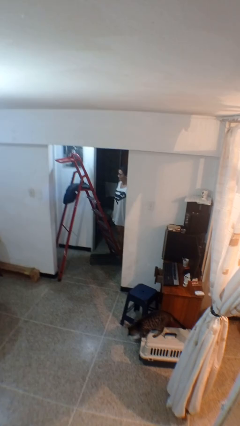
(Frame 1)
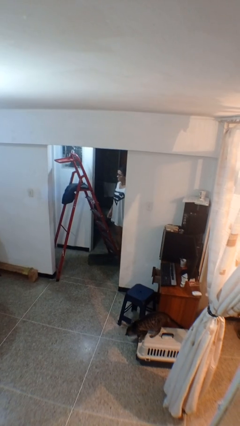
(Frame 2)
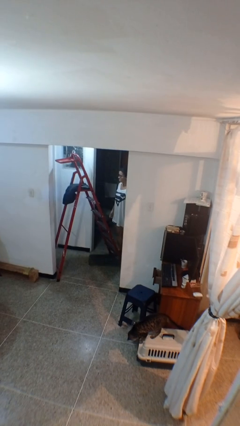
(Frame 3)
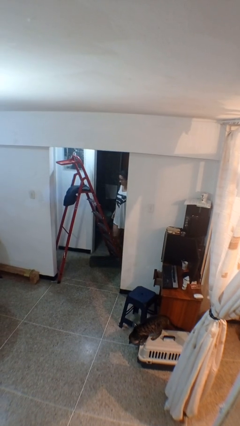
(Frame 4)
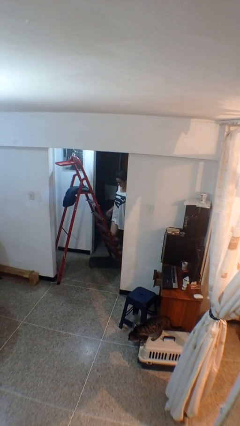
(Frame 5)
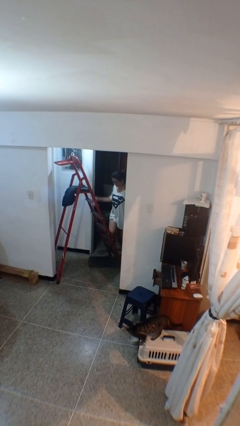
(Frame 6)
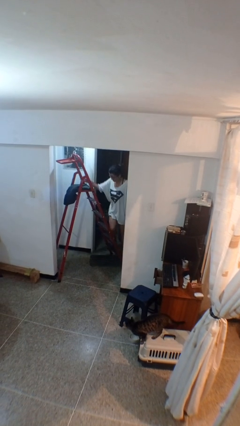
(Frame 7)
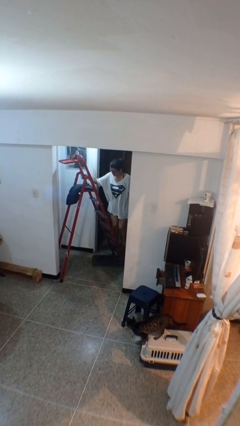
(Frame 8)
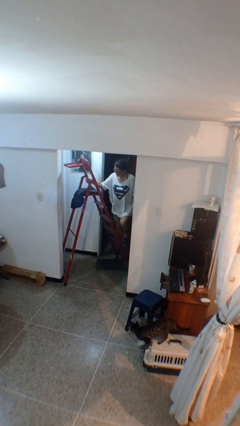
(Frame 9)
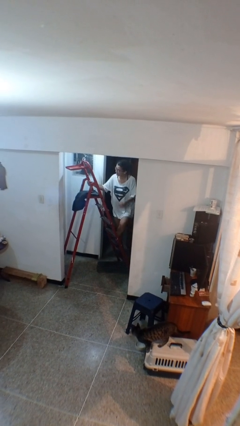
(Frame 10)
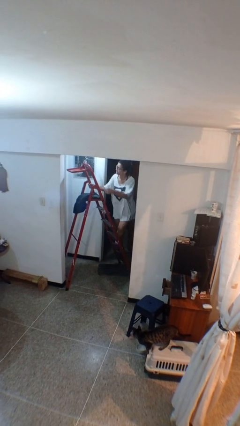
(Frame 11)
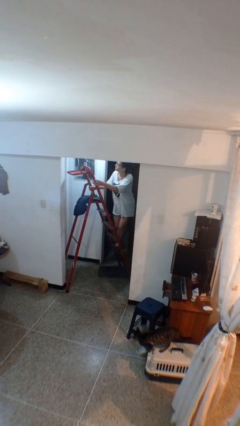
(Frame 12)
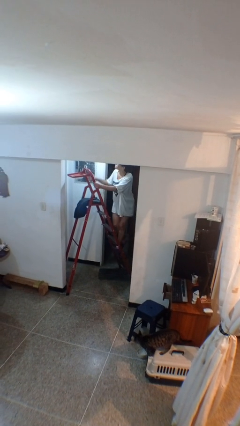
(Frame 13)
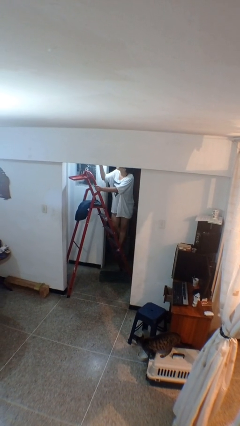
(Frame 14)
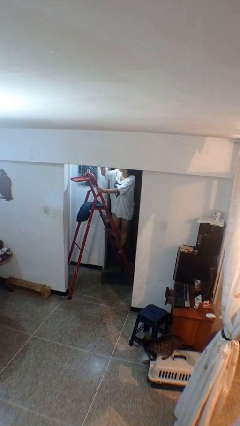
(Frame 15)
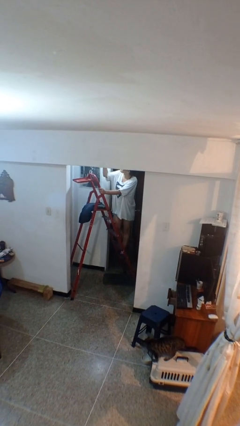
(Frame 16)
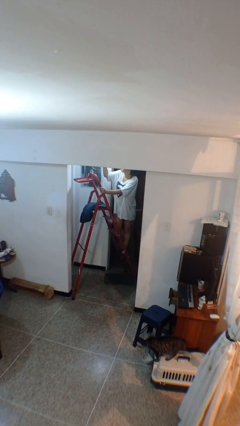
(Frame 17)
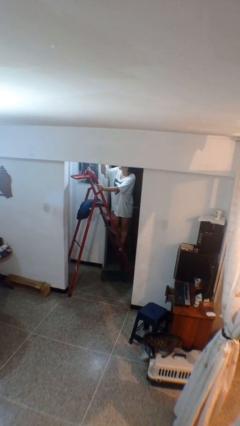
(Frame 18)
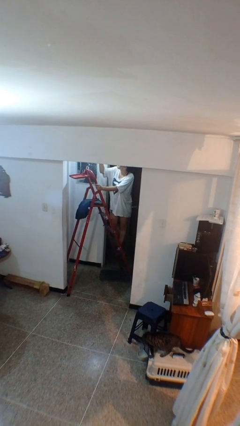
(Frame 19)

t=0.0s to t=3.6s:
person climbs up ladder

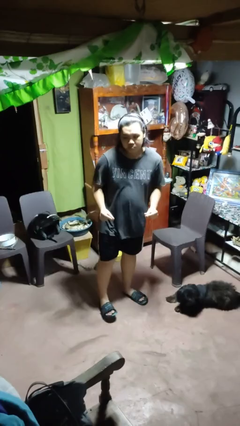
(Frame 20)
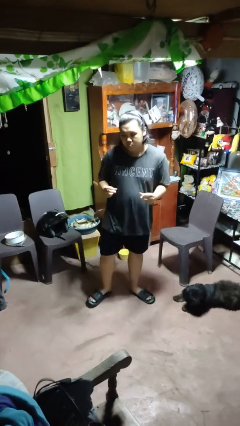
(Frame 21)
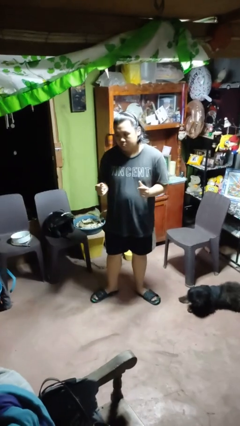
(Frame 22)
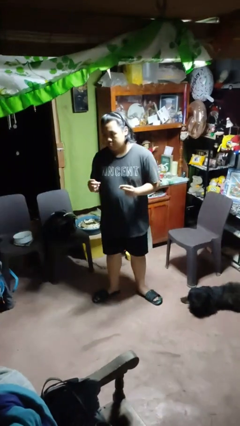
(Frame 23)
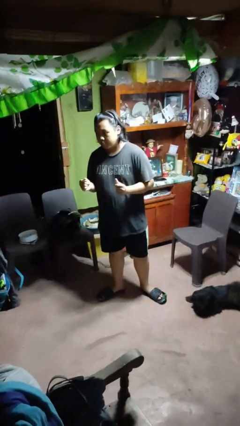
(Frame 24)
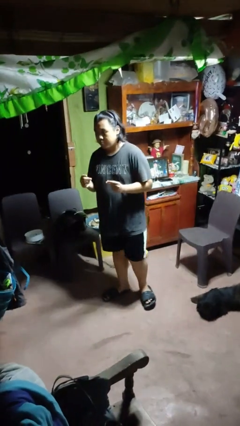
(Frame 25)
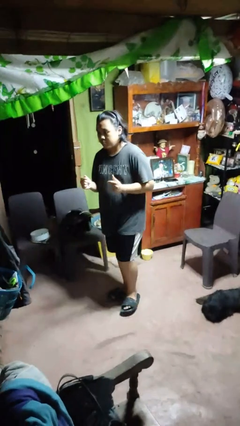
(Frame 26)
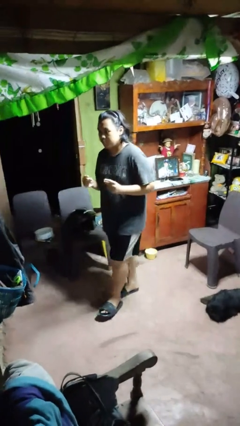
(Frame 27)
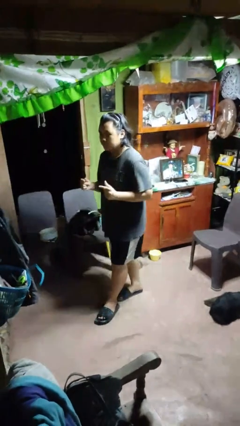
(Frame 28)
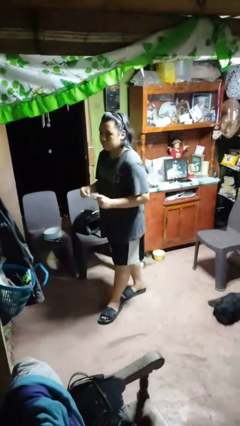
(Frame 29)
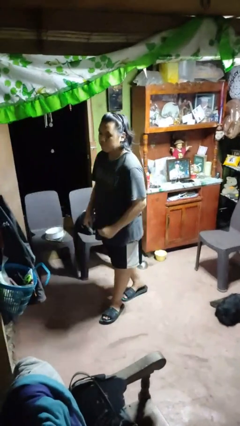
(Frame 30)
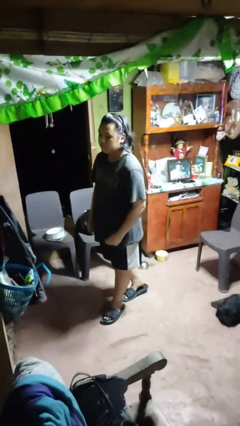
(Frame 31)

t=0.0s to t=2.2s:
person snaps fingers

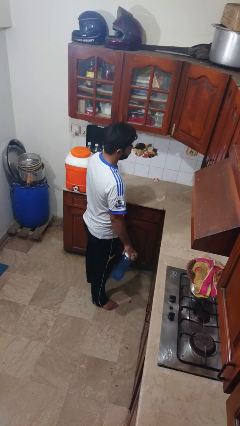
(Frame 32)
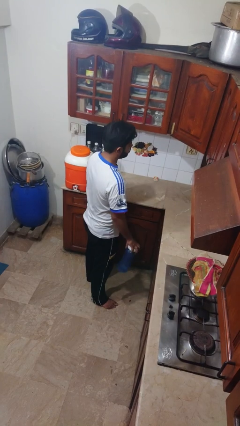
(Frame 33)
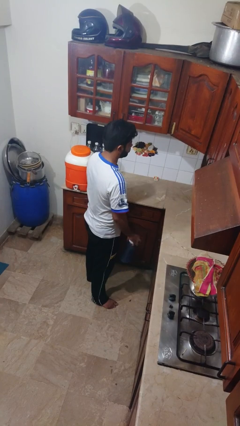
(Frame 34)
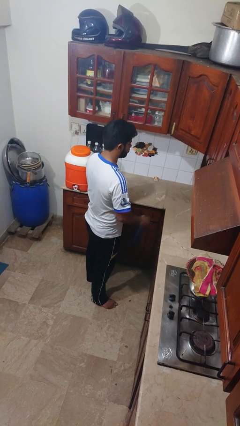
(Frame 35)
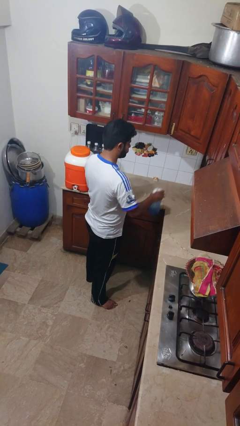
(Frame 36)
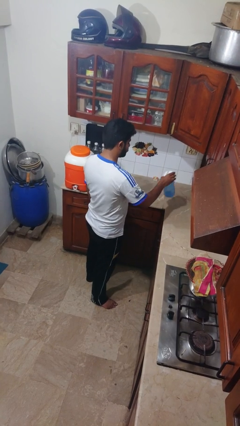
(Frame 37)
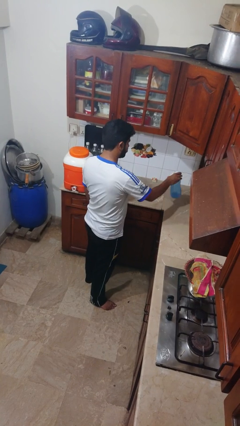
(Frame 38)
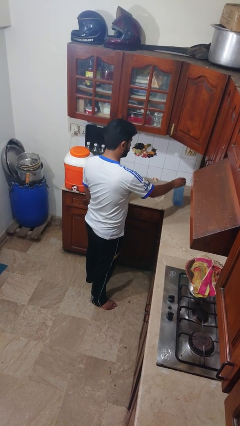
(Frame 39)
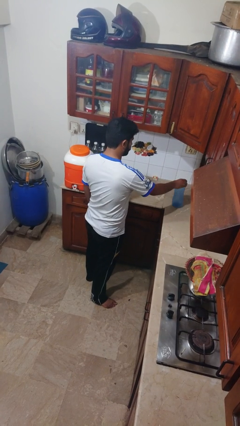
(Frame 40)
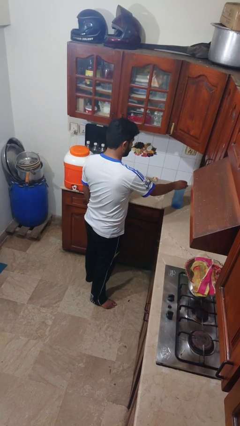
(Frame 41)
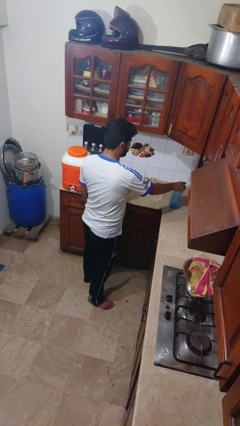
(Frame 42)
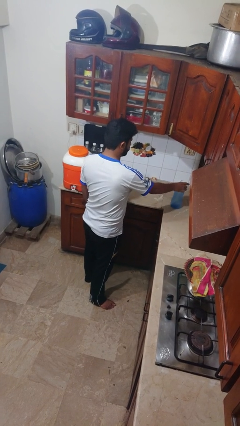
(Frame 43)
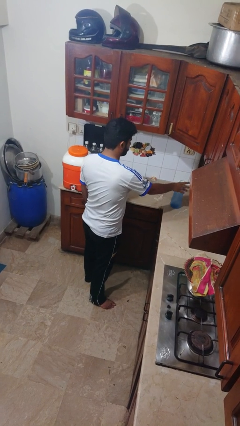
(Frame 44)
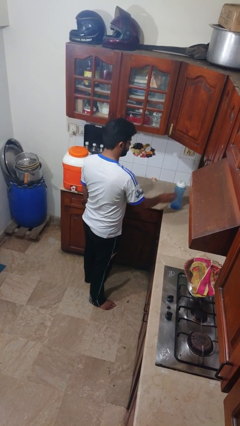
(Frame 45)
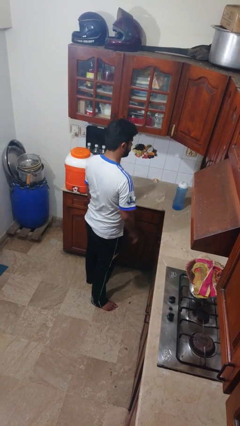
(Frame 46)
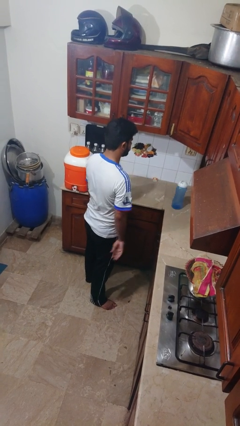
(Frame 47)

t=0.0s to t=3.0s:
person puts down object on countertop

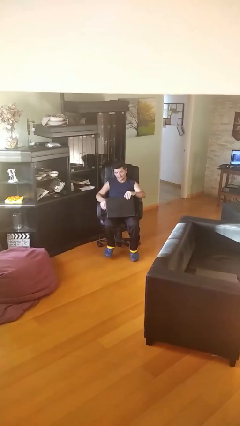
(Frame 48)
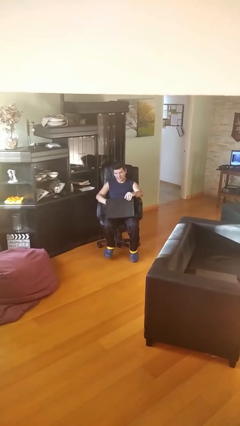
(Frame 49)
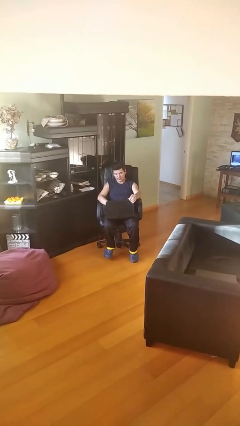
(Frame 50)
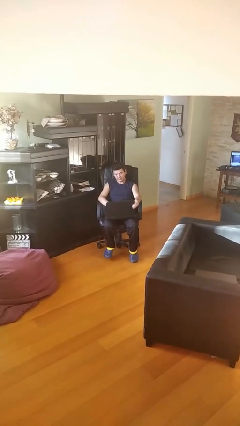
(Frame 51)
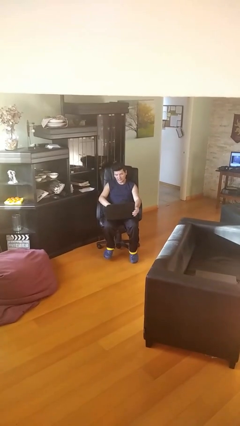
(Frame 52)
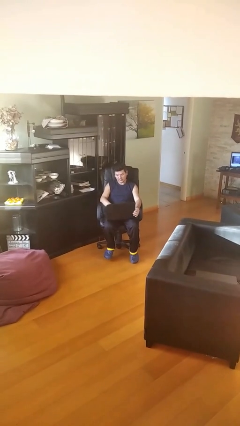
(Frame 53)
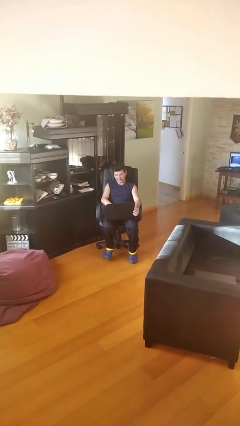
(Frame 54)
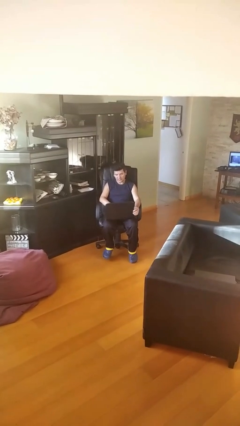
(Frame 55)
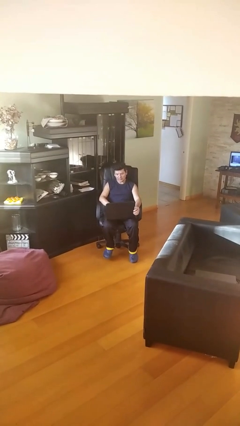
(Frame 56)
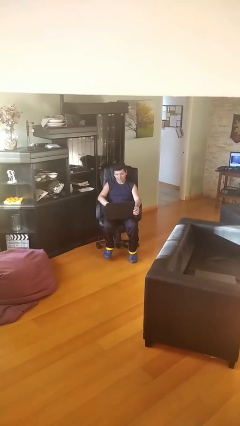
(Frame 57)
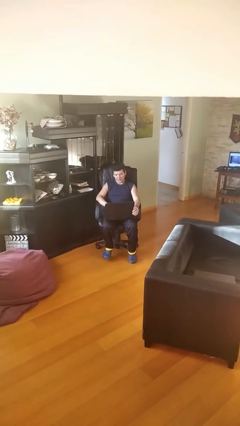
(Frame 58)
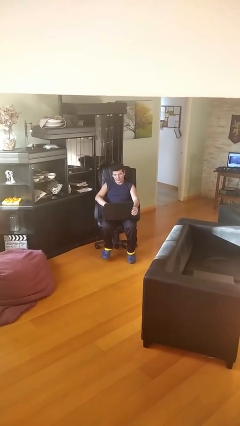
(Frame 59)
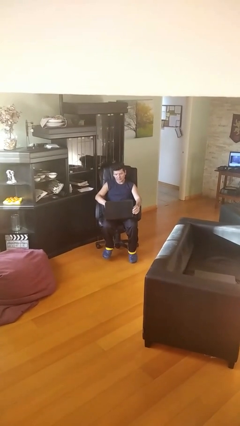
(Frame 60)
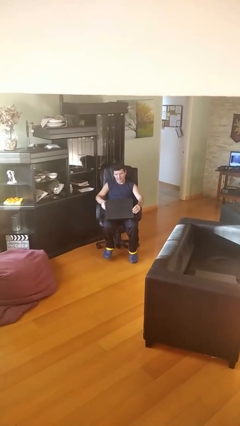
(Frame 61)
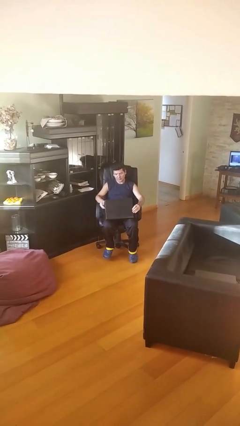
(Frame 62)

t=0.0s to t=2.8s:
person interacts with laptop

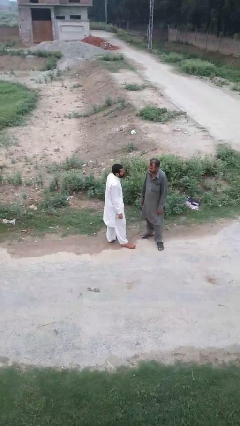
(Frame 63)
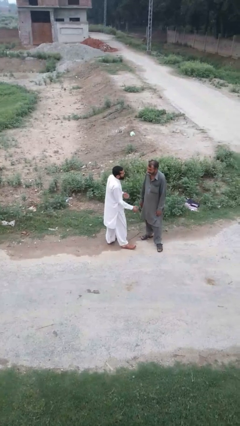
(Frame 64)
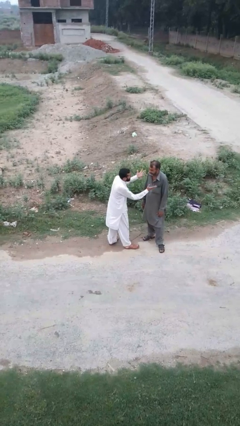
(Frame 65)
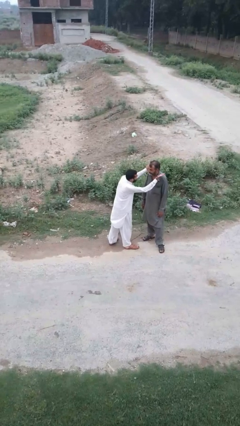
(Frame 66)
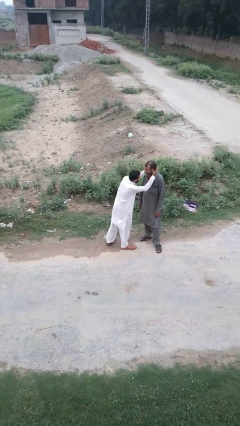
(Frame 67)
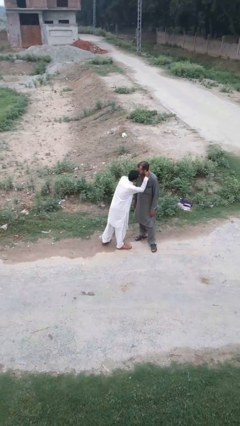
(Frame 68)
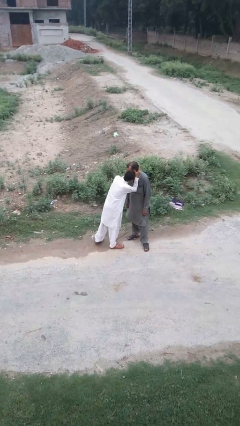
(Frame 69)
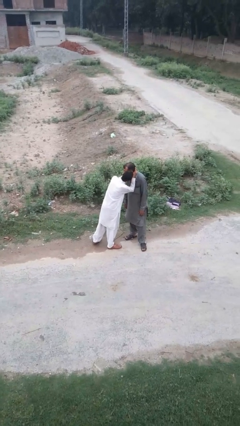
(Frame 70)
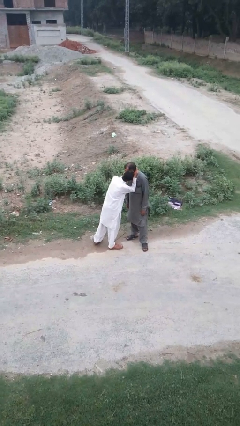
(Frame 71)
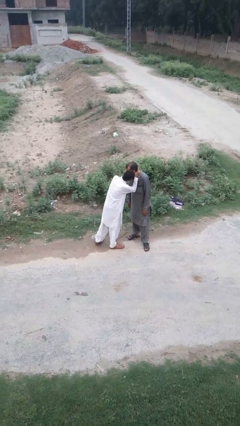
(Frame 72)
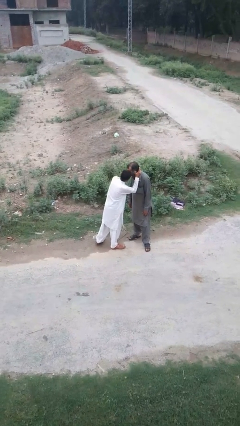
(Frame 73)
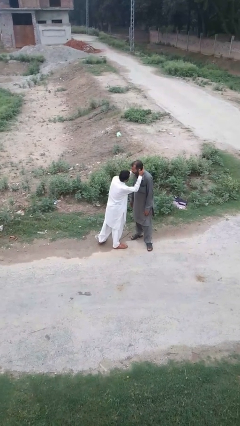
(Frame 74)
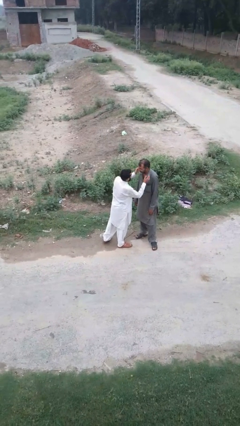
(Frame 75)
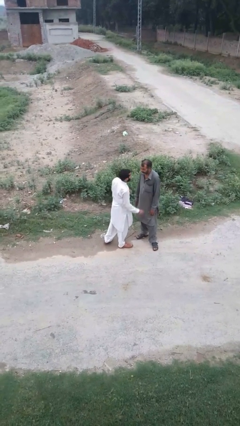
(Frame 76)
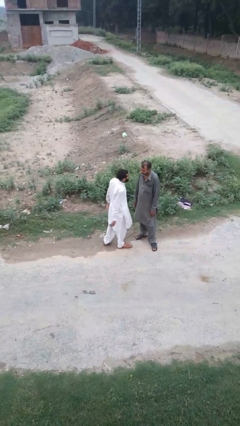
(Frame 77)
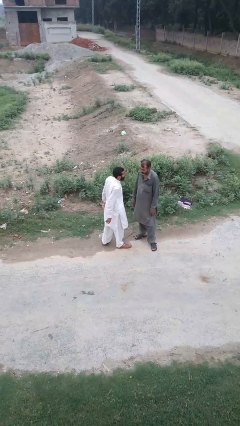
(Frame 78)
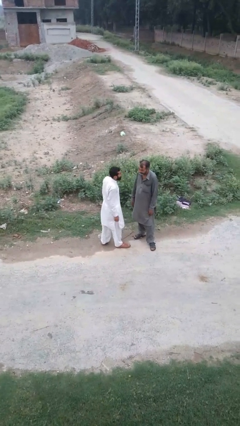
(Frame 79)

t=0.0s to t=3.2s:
person kisses cheek of person

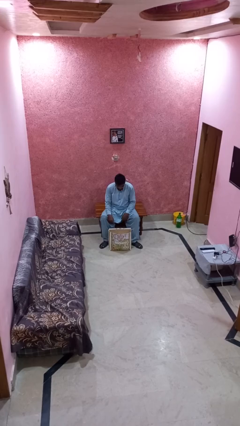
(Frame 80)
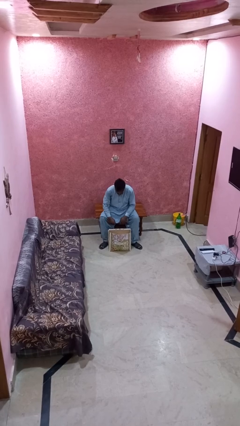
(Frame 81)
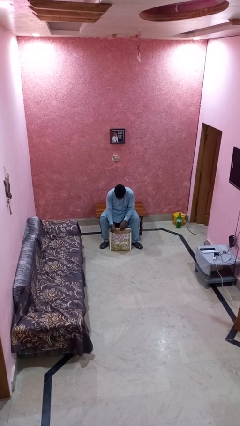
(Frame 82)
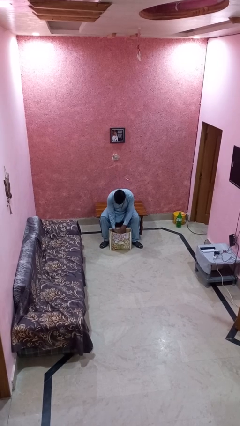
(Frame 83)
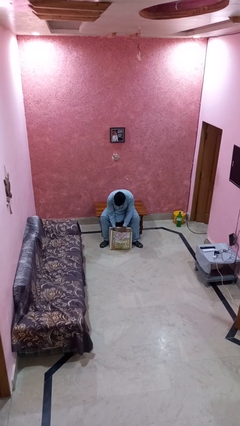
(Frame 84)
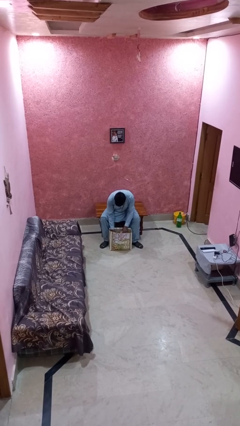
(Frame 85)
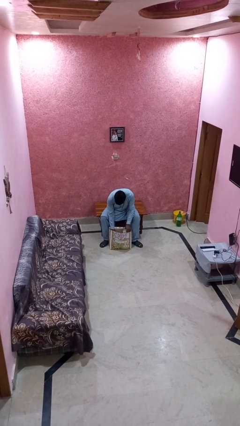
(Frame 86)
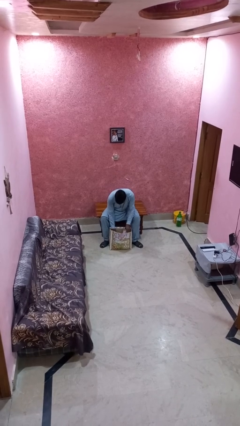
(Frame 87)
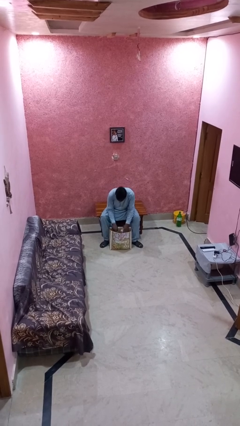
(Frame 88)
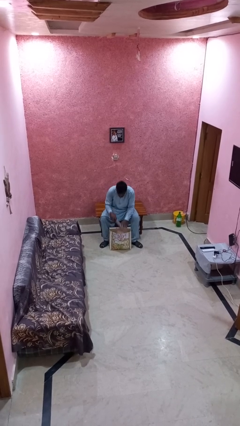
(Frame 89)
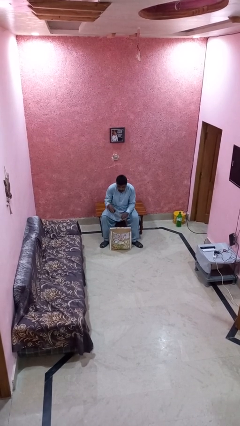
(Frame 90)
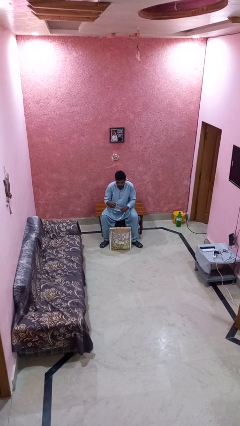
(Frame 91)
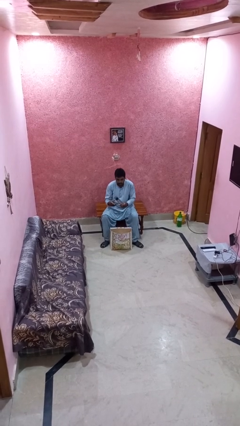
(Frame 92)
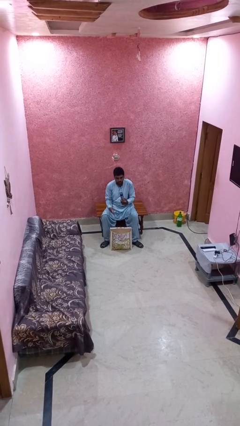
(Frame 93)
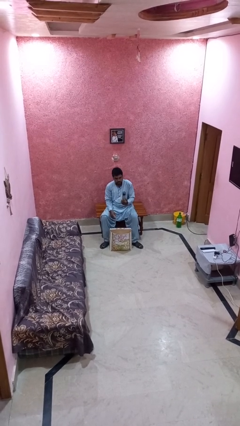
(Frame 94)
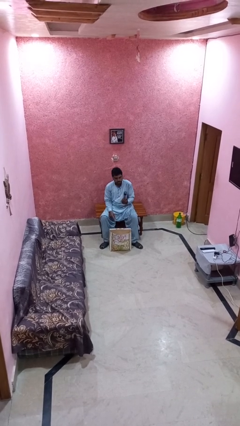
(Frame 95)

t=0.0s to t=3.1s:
person takes object from bag
